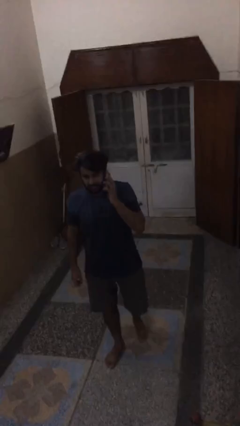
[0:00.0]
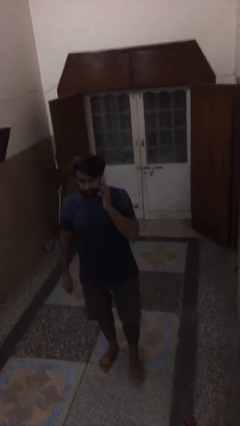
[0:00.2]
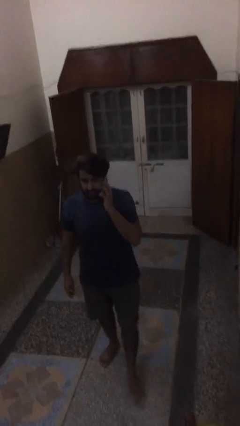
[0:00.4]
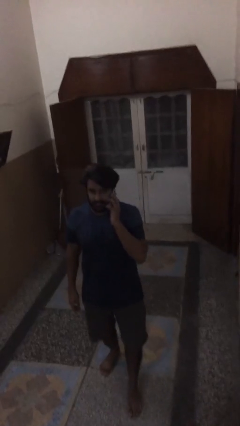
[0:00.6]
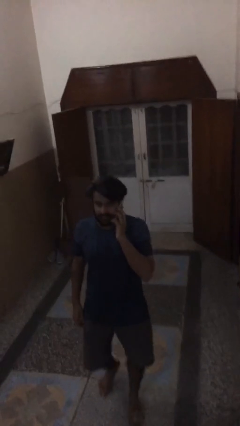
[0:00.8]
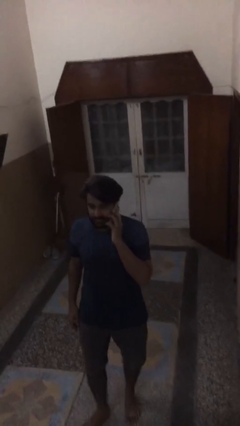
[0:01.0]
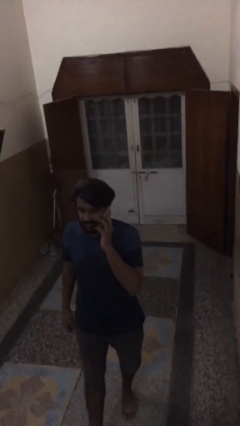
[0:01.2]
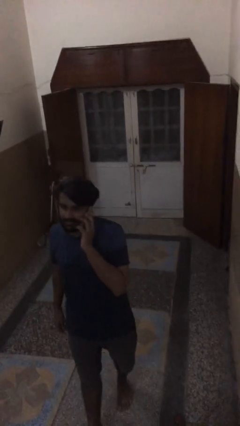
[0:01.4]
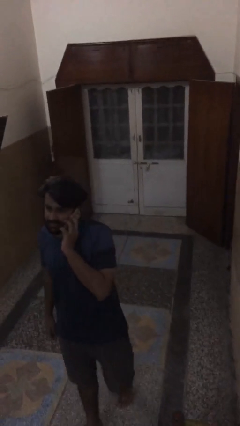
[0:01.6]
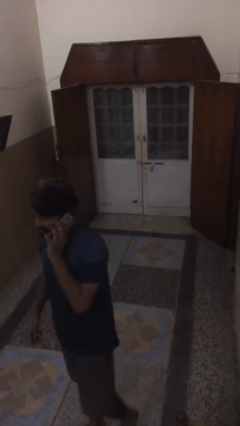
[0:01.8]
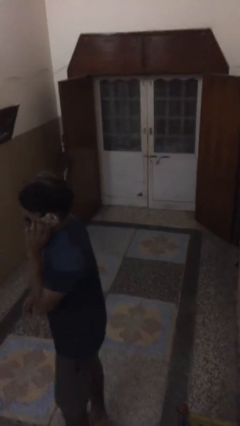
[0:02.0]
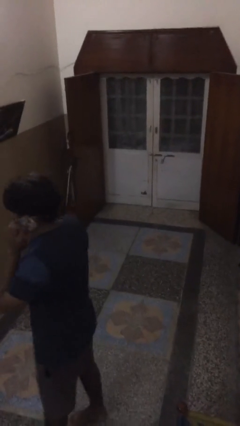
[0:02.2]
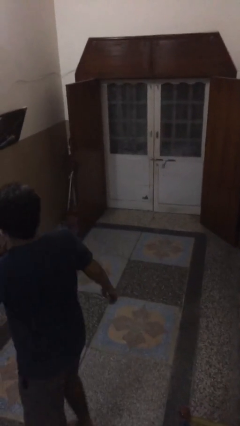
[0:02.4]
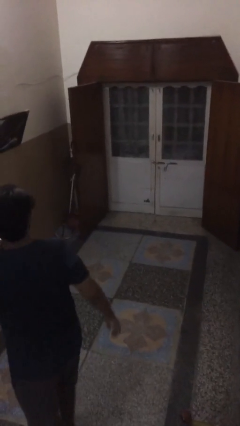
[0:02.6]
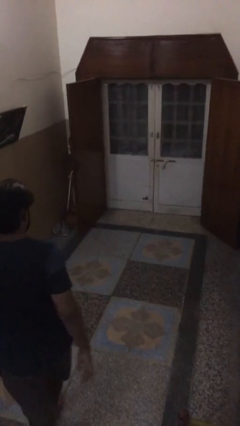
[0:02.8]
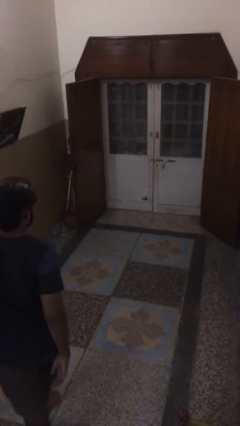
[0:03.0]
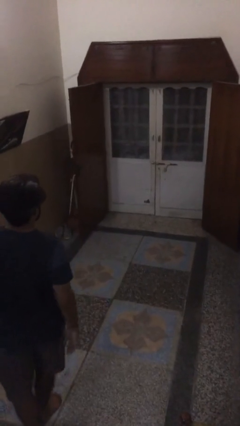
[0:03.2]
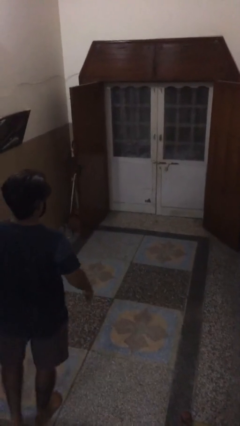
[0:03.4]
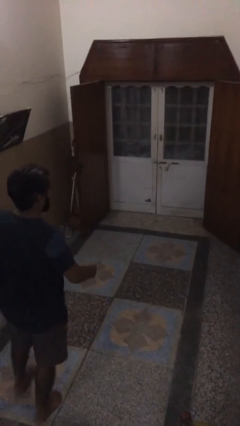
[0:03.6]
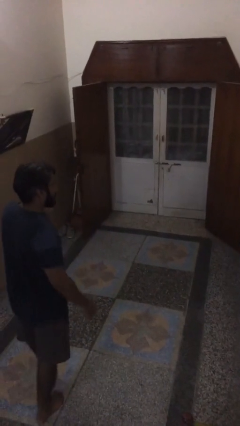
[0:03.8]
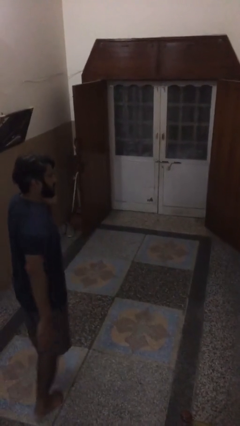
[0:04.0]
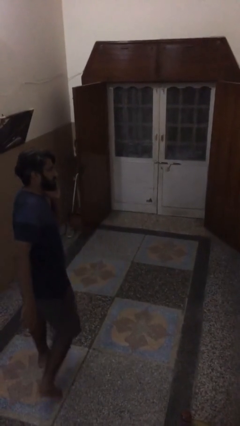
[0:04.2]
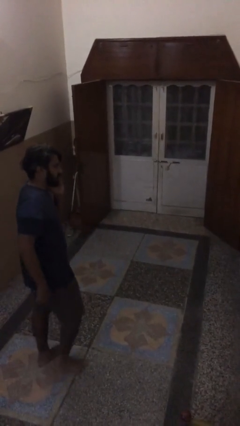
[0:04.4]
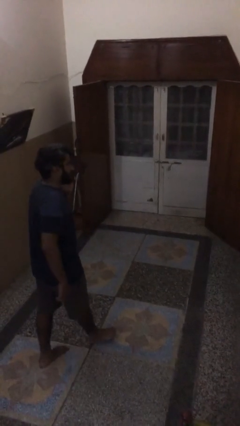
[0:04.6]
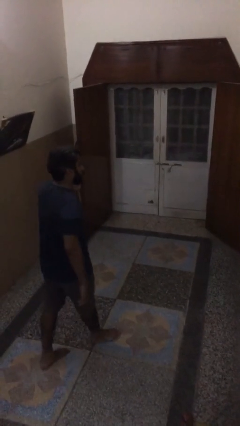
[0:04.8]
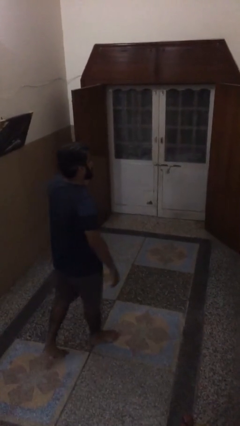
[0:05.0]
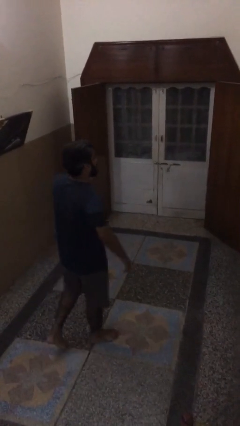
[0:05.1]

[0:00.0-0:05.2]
person talks on phone

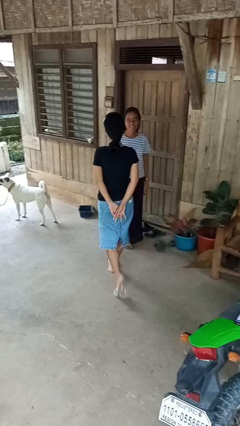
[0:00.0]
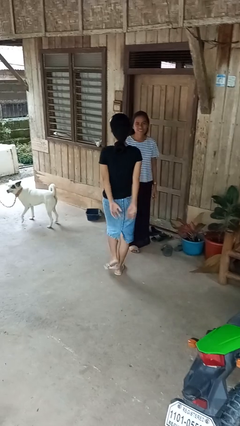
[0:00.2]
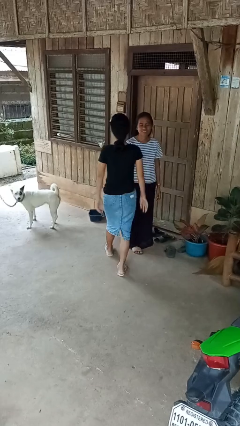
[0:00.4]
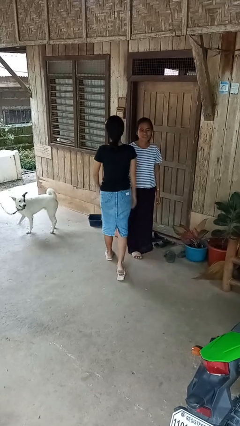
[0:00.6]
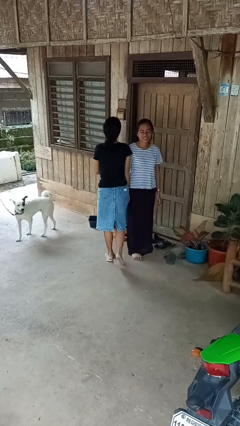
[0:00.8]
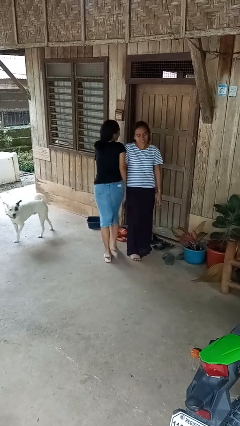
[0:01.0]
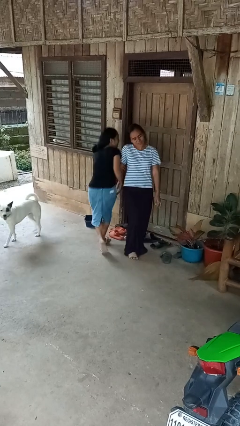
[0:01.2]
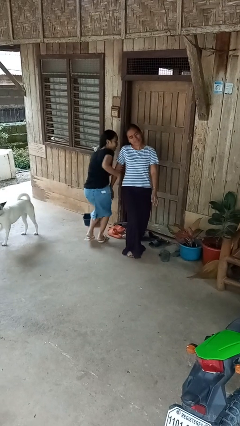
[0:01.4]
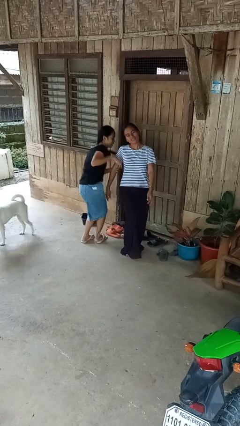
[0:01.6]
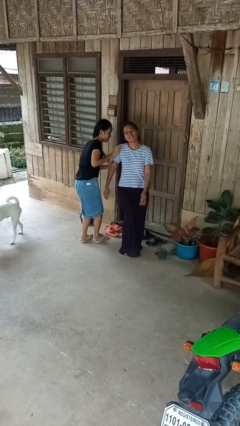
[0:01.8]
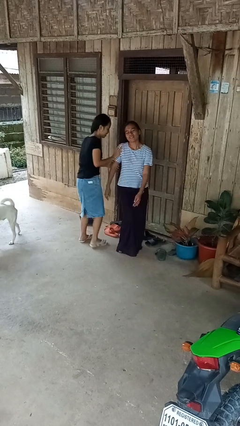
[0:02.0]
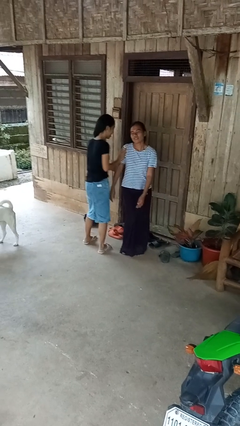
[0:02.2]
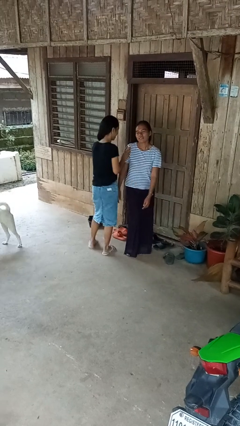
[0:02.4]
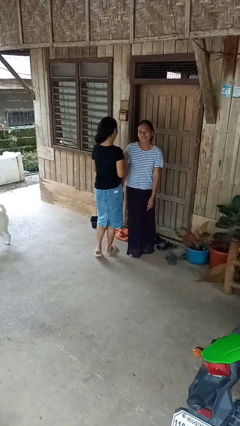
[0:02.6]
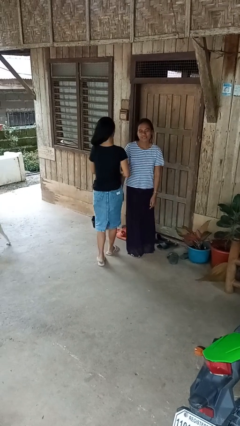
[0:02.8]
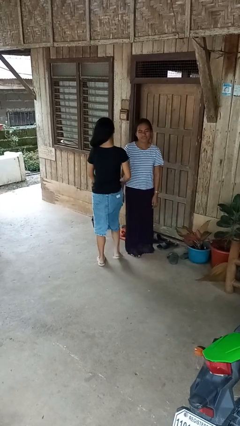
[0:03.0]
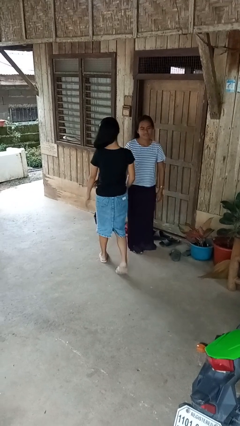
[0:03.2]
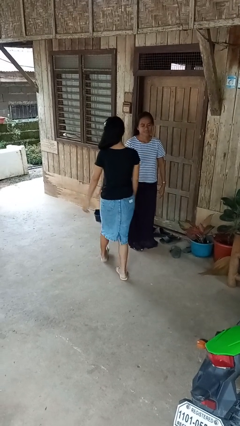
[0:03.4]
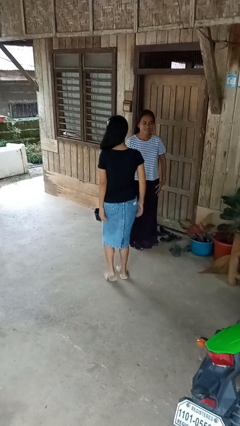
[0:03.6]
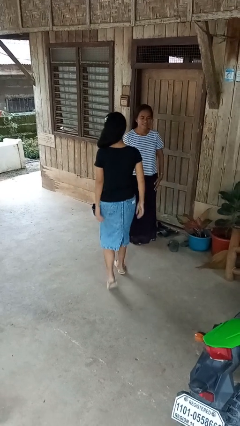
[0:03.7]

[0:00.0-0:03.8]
person bumps into person

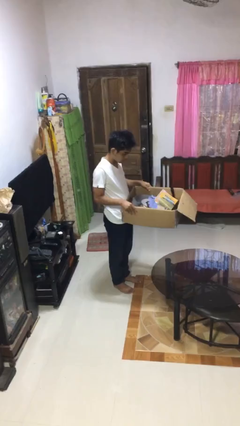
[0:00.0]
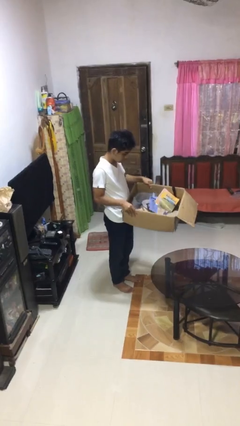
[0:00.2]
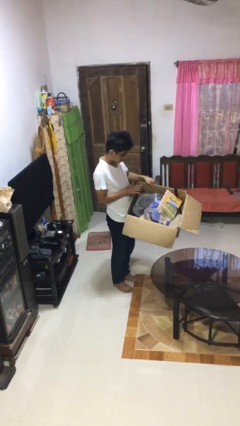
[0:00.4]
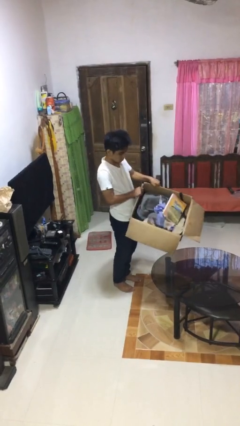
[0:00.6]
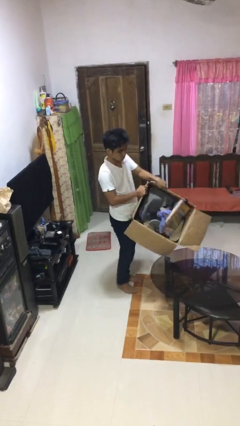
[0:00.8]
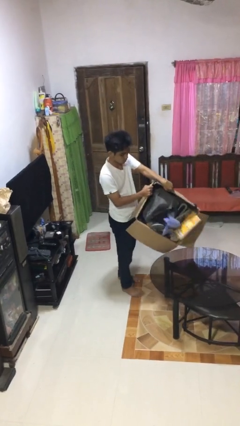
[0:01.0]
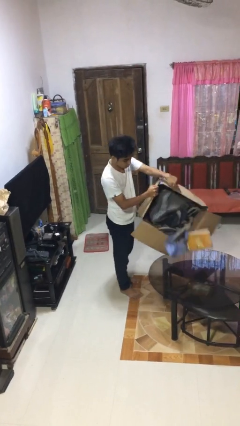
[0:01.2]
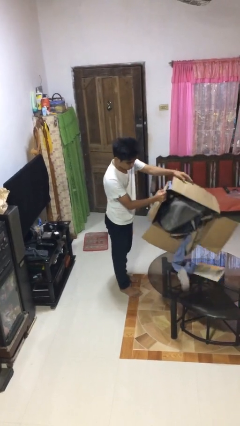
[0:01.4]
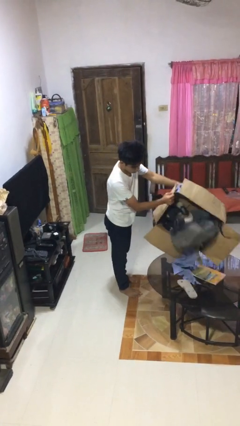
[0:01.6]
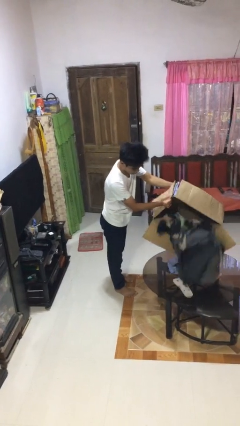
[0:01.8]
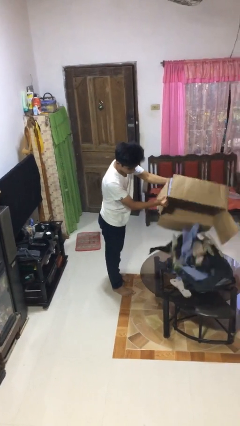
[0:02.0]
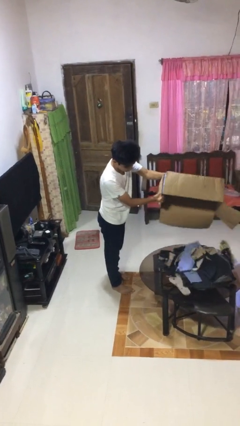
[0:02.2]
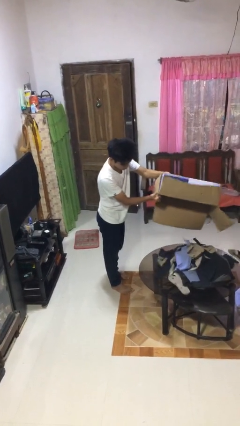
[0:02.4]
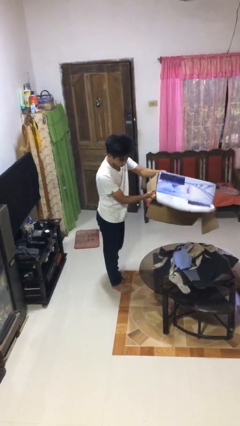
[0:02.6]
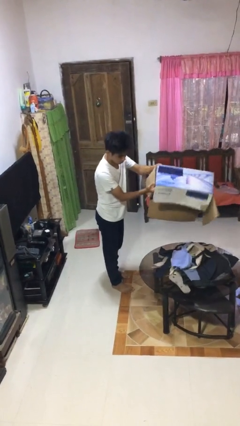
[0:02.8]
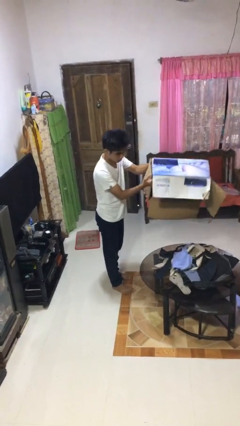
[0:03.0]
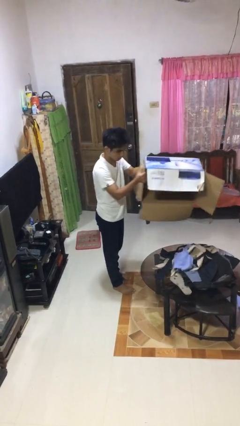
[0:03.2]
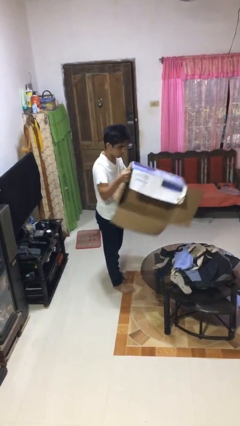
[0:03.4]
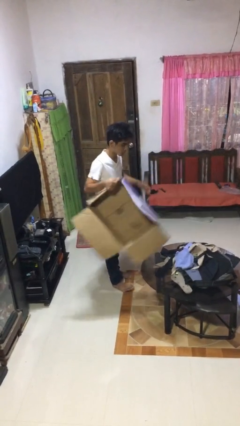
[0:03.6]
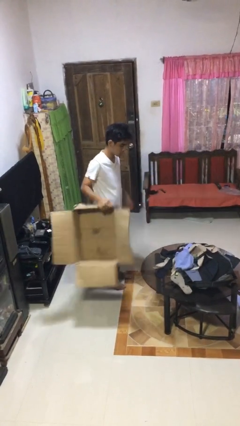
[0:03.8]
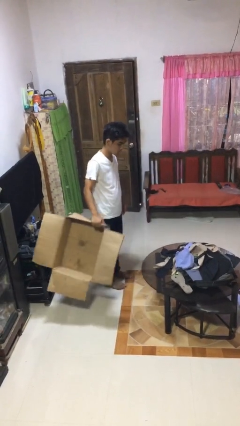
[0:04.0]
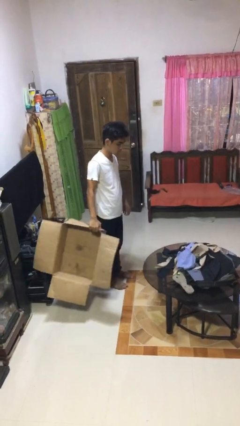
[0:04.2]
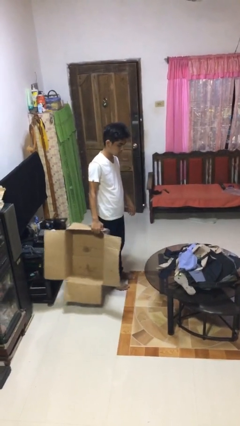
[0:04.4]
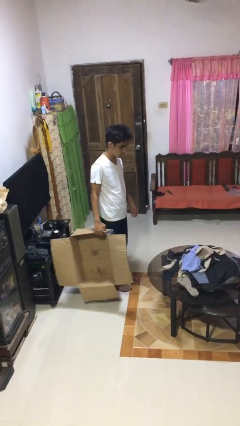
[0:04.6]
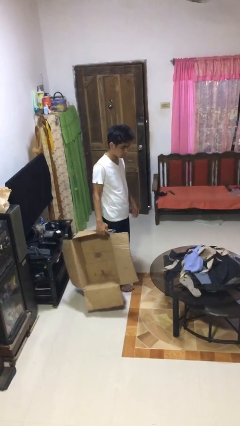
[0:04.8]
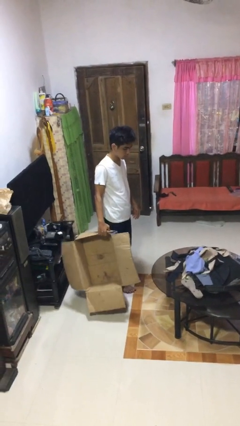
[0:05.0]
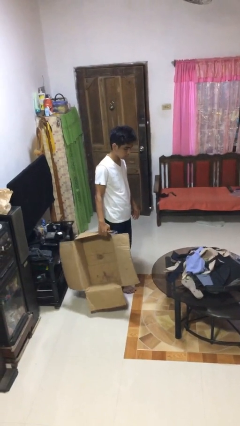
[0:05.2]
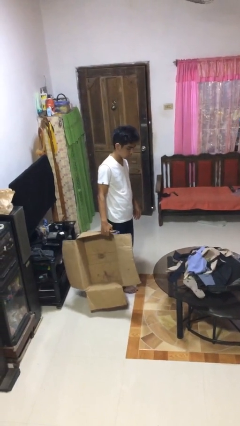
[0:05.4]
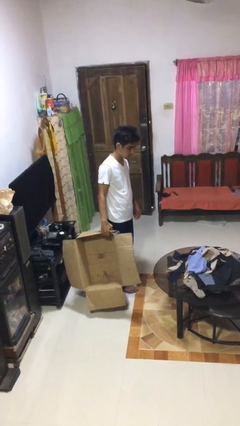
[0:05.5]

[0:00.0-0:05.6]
person unloads box onto table

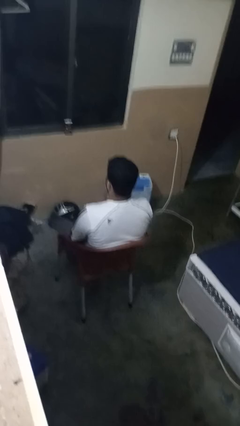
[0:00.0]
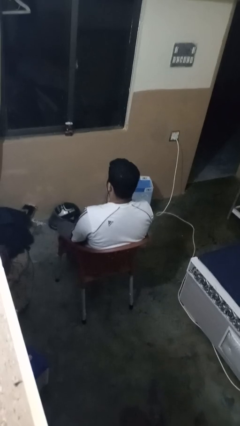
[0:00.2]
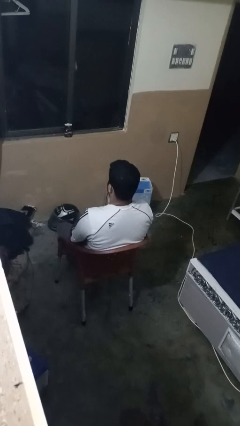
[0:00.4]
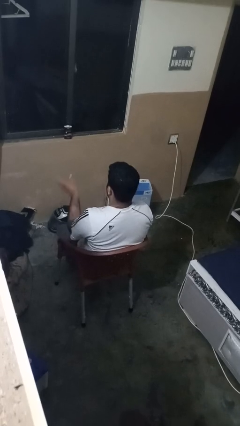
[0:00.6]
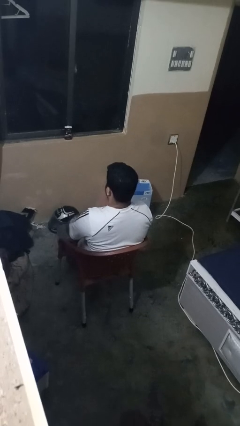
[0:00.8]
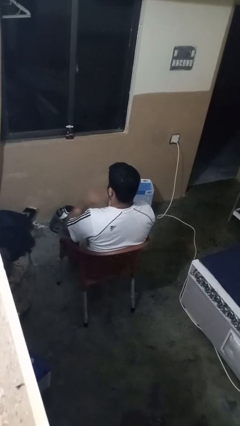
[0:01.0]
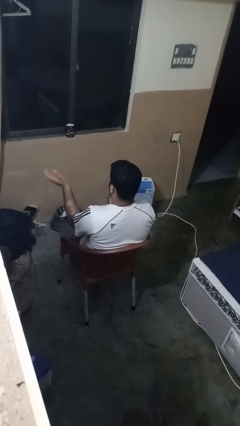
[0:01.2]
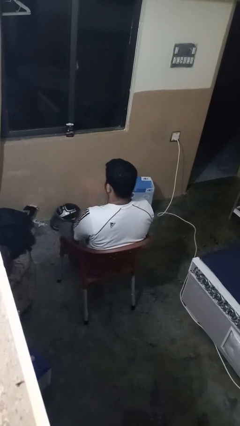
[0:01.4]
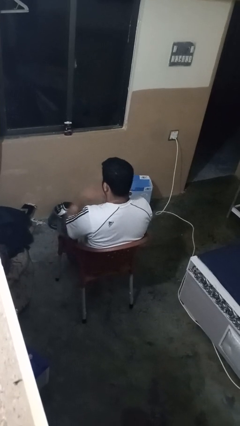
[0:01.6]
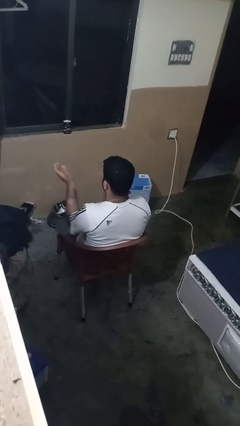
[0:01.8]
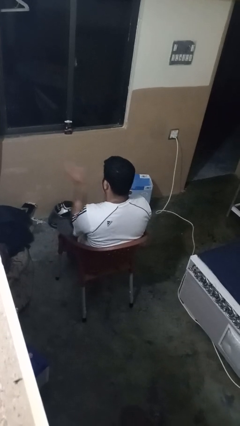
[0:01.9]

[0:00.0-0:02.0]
person drums on chest

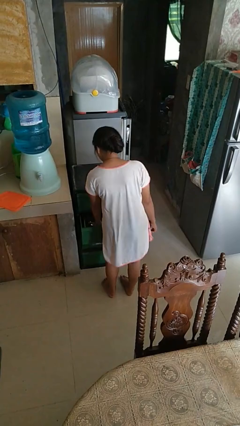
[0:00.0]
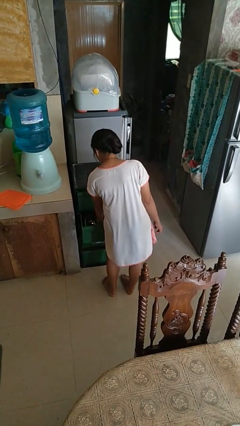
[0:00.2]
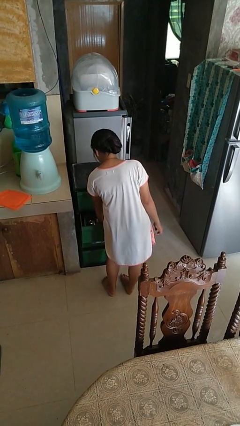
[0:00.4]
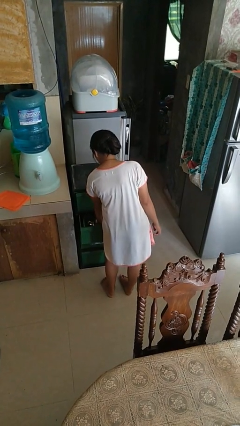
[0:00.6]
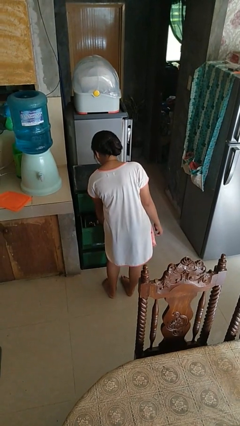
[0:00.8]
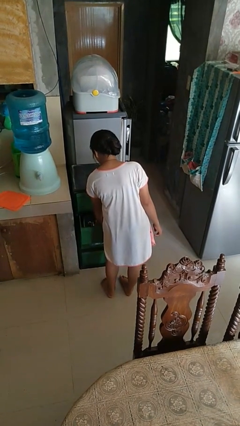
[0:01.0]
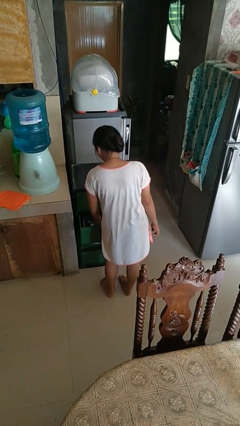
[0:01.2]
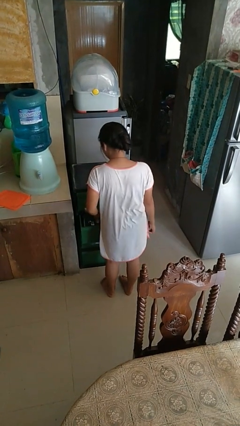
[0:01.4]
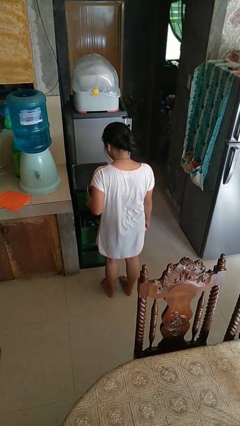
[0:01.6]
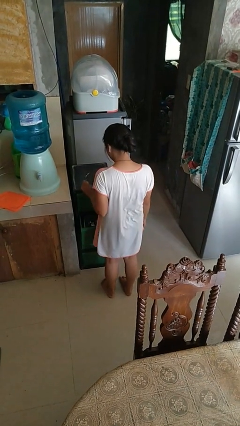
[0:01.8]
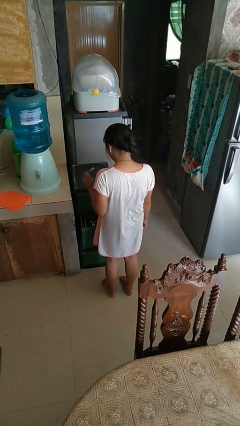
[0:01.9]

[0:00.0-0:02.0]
person takes object from kitchen drawer
